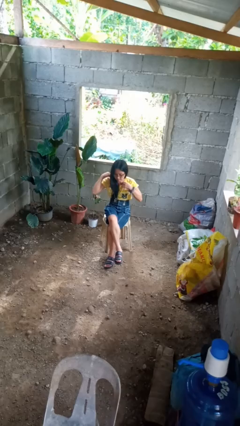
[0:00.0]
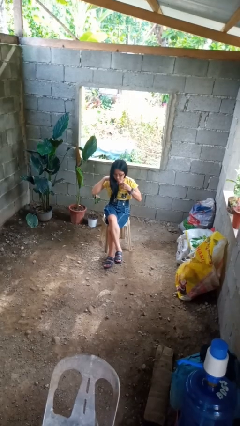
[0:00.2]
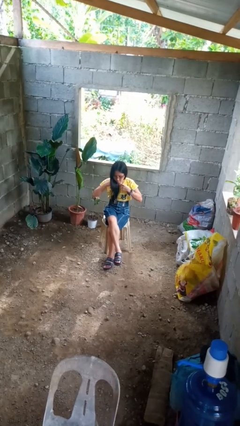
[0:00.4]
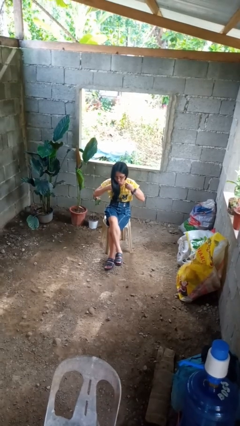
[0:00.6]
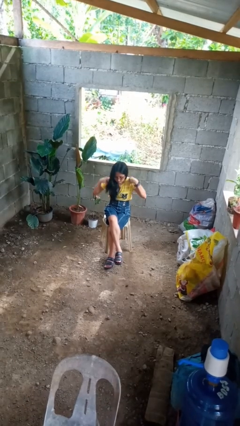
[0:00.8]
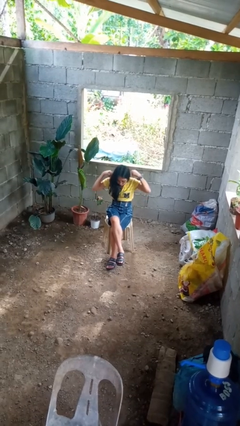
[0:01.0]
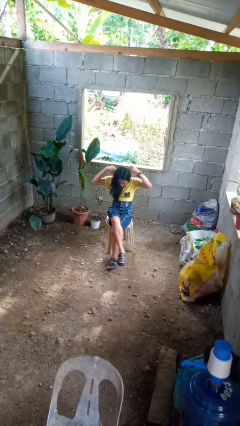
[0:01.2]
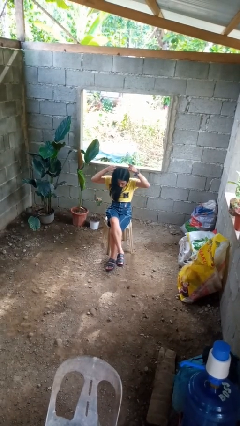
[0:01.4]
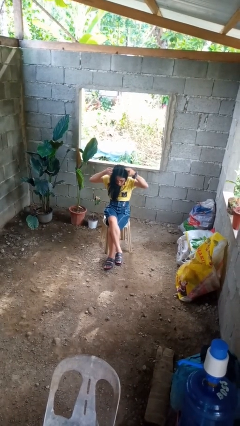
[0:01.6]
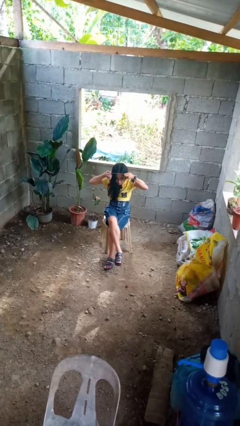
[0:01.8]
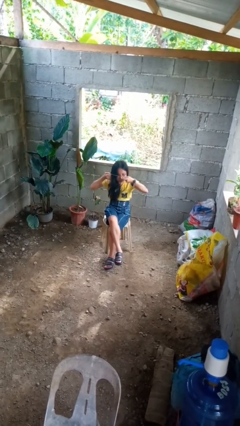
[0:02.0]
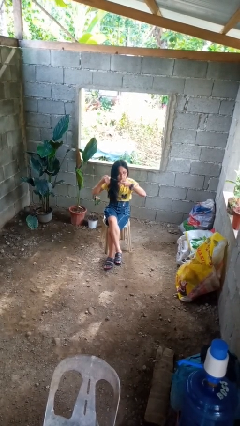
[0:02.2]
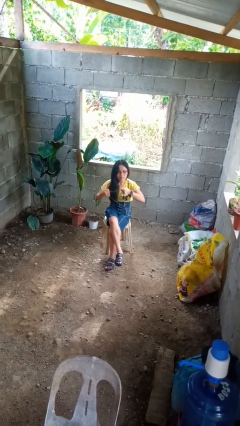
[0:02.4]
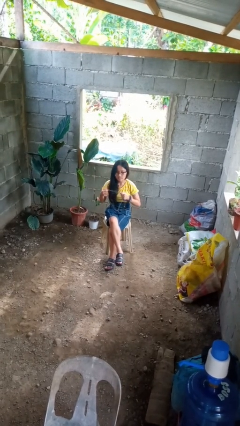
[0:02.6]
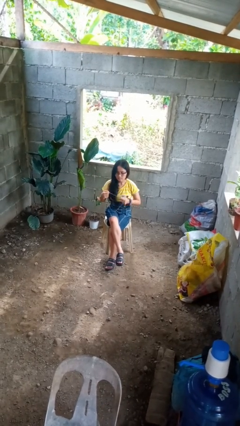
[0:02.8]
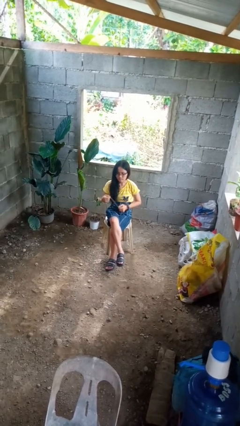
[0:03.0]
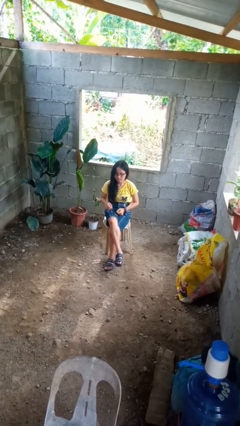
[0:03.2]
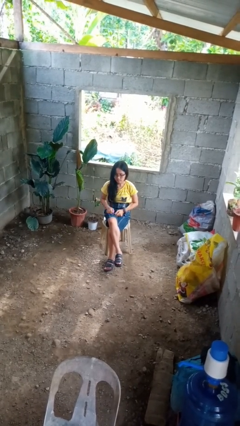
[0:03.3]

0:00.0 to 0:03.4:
person takes off necklace

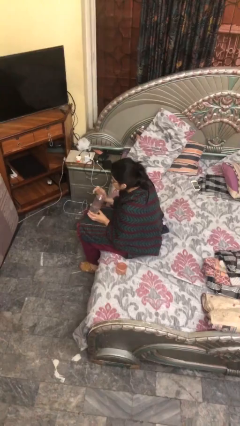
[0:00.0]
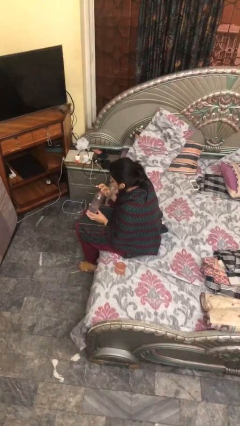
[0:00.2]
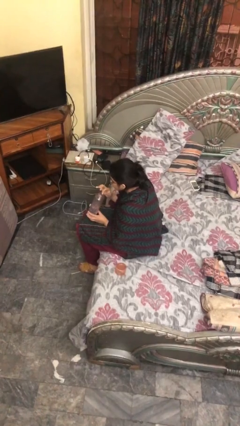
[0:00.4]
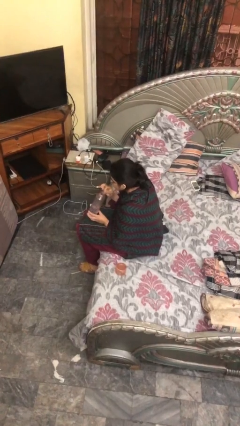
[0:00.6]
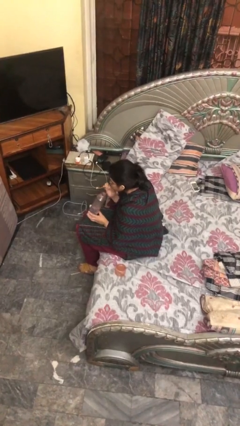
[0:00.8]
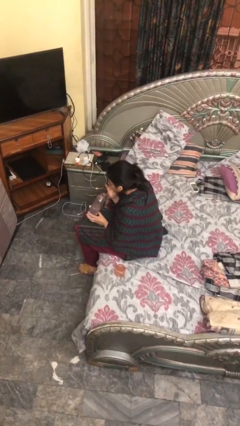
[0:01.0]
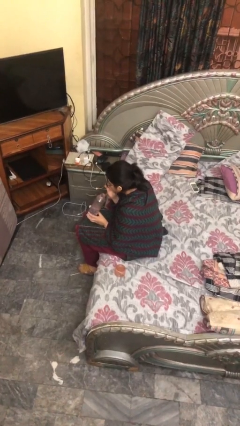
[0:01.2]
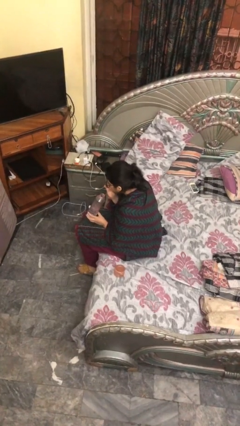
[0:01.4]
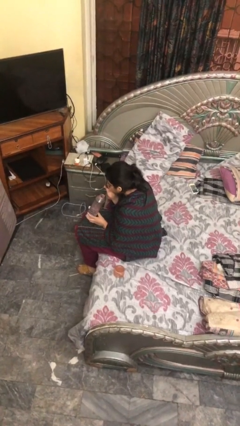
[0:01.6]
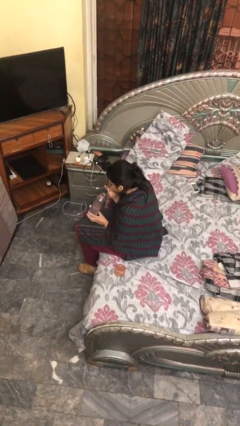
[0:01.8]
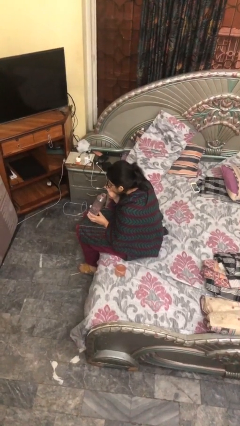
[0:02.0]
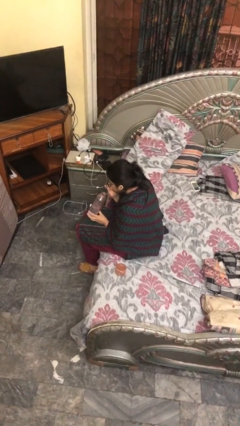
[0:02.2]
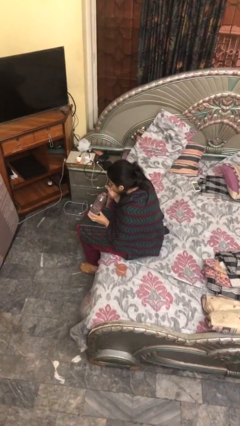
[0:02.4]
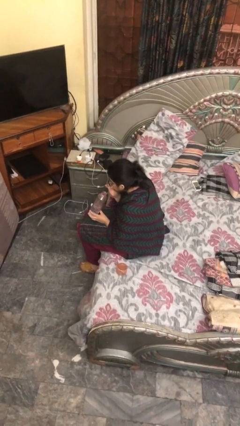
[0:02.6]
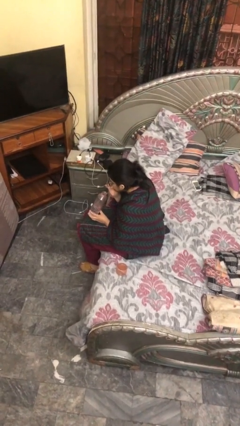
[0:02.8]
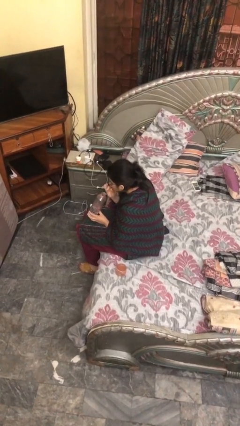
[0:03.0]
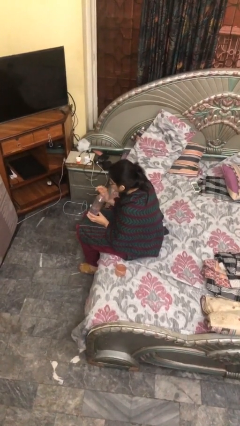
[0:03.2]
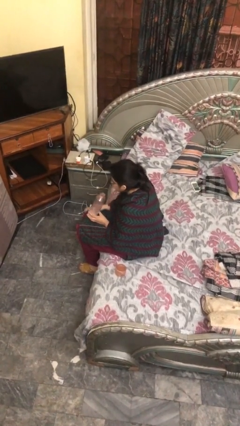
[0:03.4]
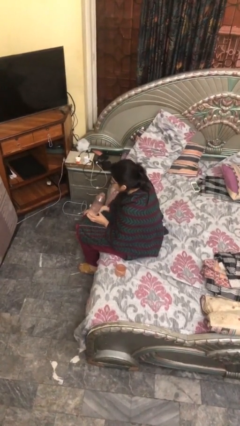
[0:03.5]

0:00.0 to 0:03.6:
person drinks from straw

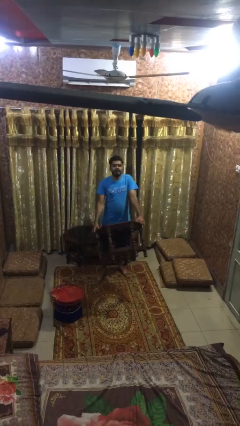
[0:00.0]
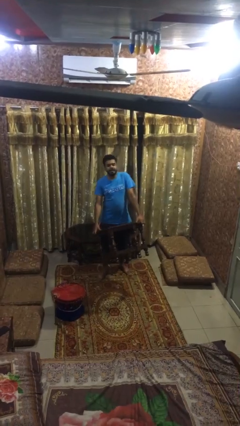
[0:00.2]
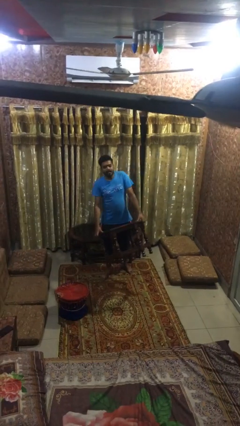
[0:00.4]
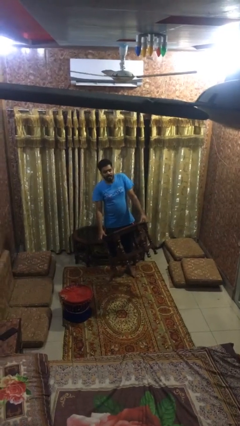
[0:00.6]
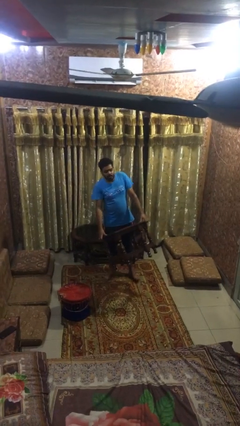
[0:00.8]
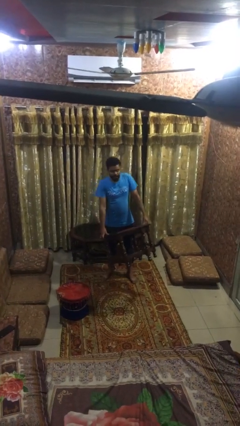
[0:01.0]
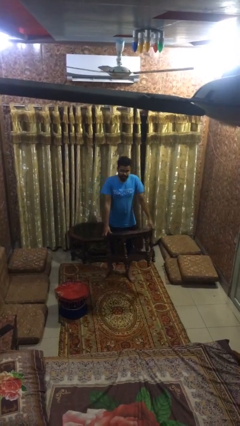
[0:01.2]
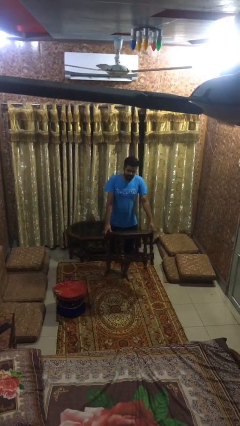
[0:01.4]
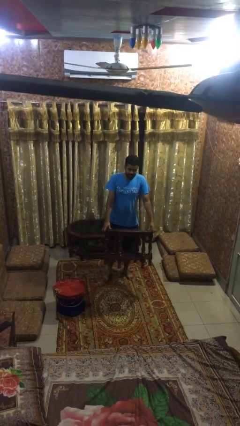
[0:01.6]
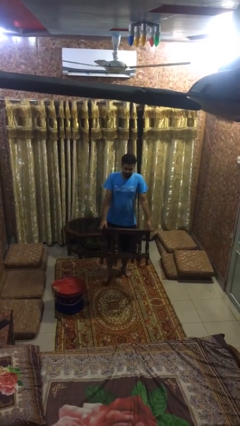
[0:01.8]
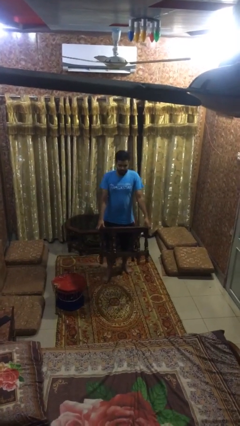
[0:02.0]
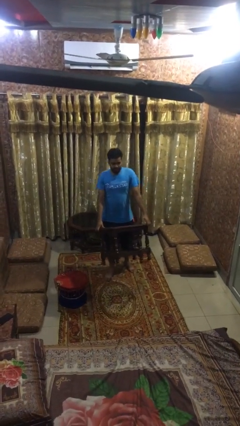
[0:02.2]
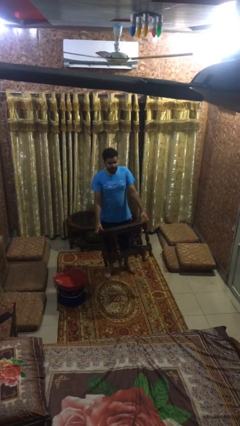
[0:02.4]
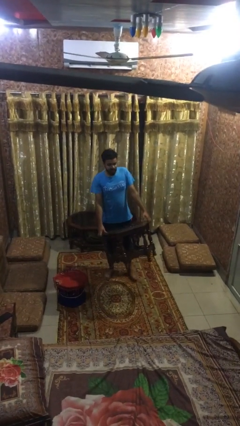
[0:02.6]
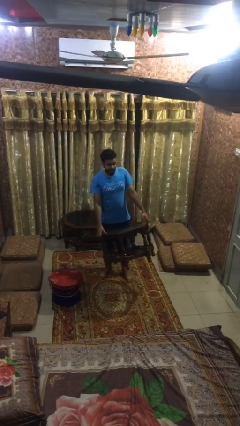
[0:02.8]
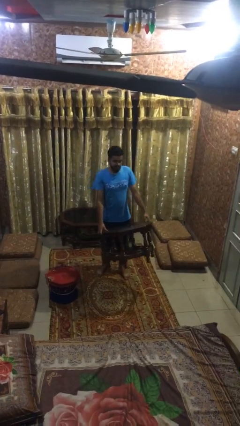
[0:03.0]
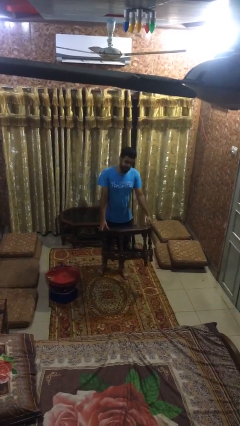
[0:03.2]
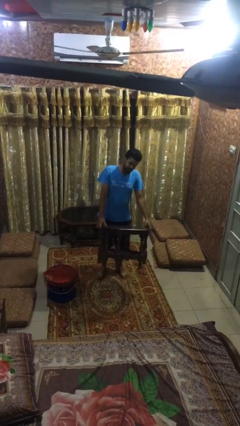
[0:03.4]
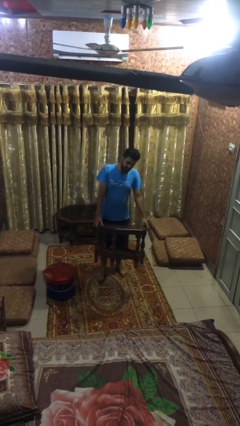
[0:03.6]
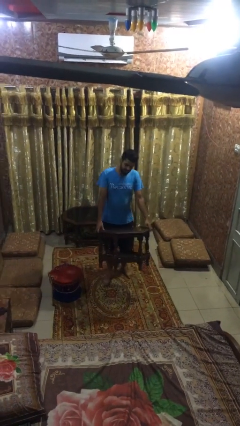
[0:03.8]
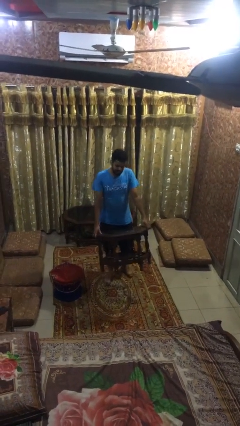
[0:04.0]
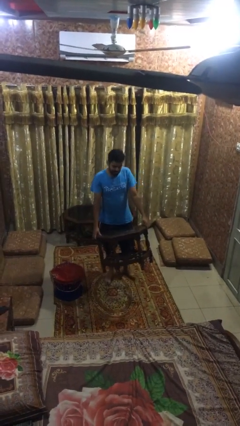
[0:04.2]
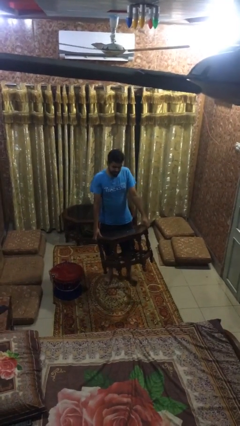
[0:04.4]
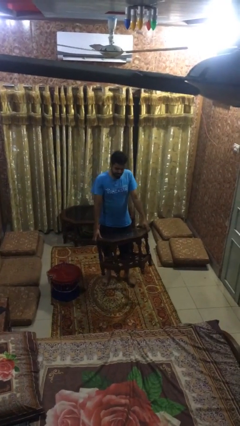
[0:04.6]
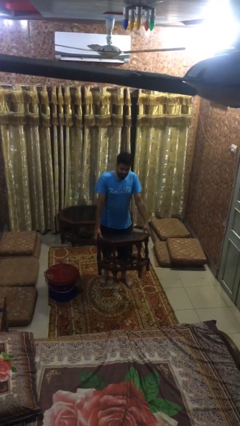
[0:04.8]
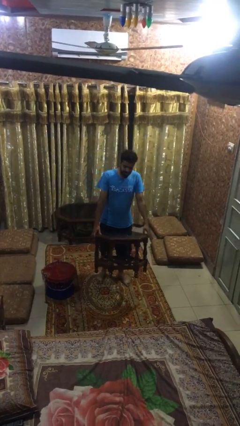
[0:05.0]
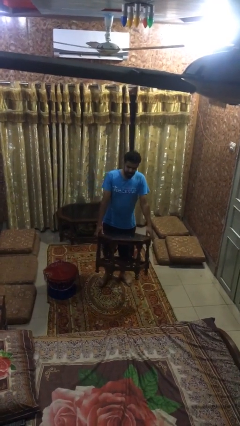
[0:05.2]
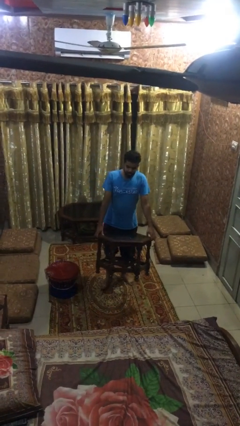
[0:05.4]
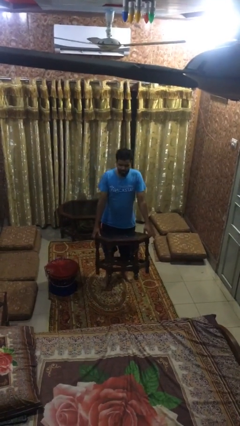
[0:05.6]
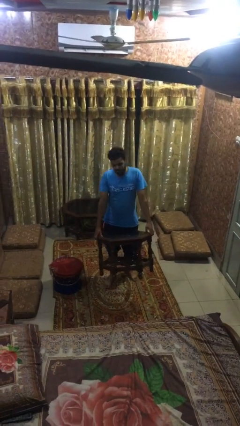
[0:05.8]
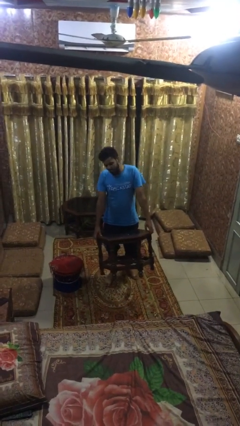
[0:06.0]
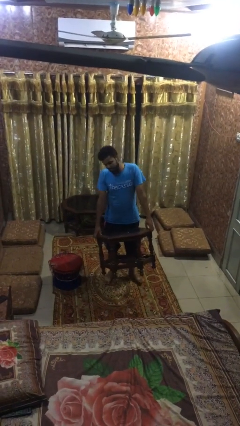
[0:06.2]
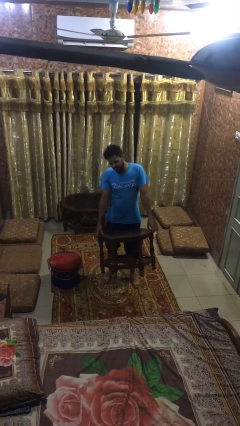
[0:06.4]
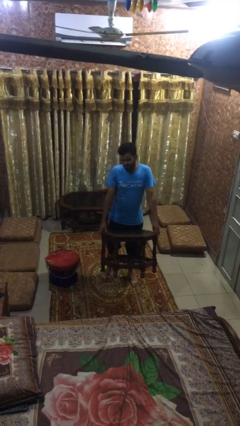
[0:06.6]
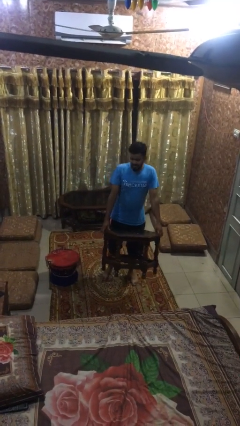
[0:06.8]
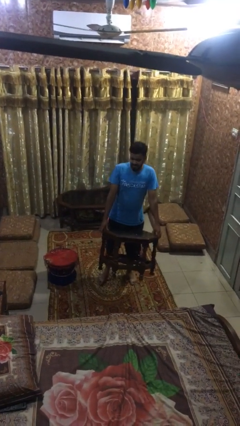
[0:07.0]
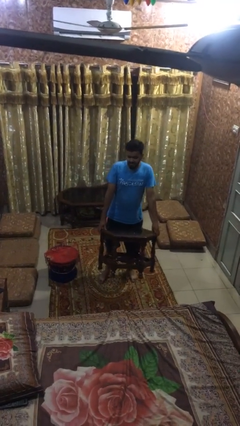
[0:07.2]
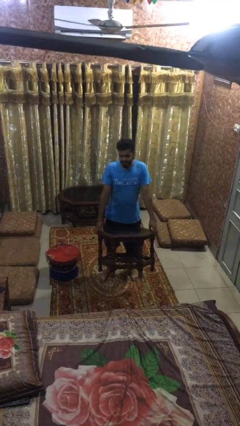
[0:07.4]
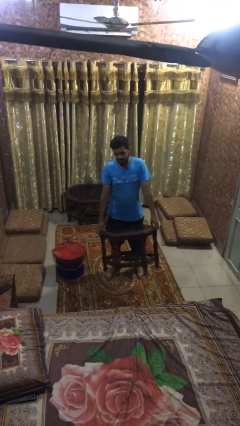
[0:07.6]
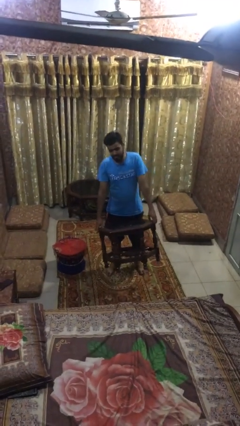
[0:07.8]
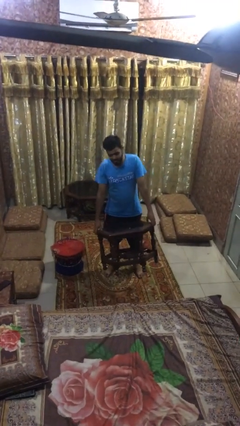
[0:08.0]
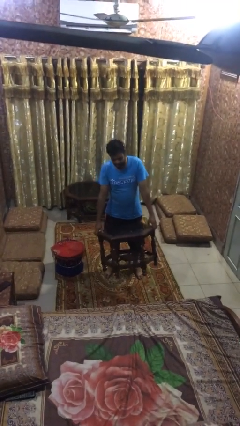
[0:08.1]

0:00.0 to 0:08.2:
person carries heavy object

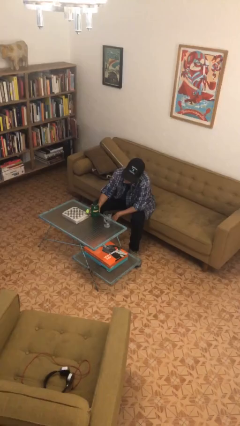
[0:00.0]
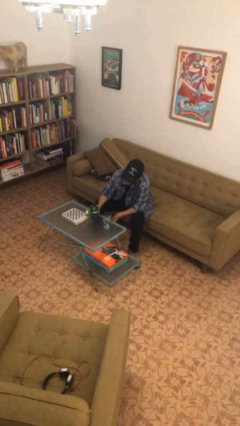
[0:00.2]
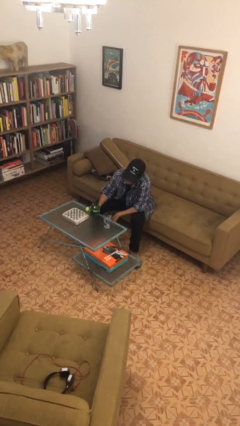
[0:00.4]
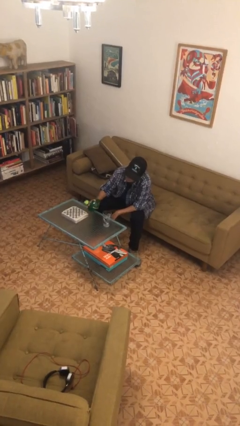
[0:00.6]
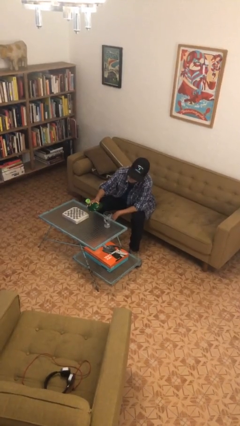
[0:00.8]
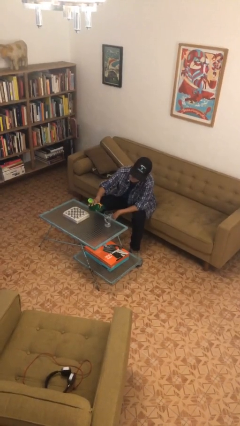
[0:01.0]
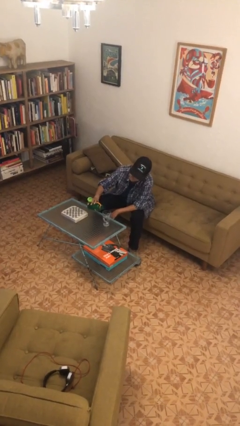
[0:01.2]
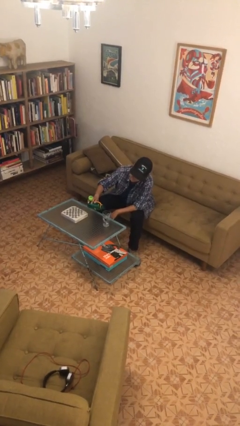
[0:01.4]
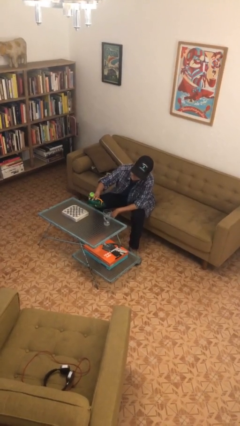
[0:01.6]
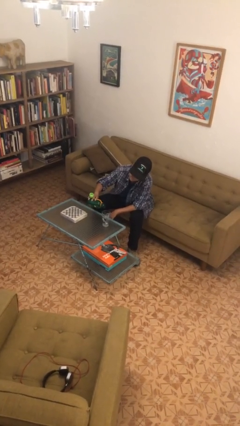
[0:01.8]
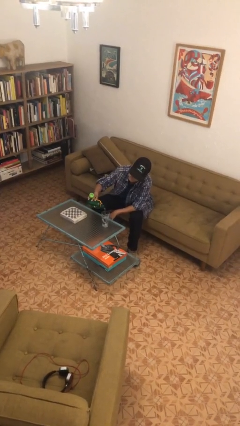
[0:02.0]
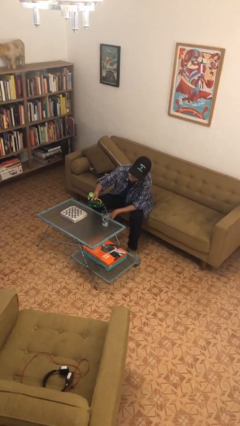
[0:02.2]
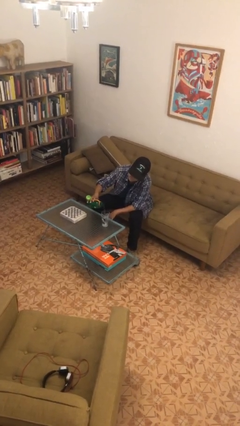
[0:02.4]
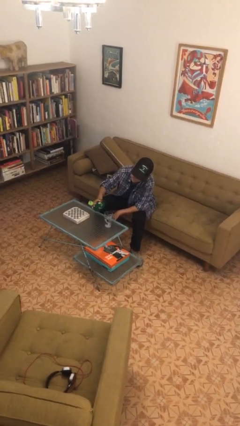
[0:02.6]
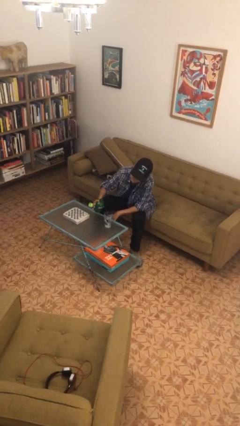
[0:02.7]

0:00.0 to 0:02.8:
person pours liquid into cup
